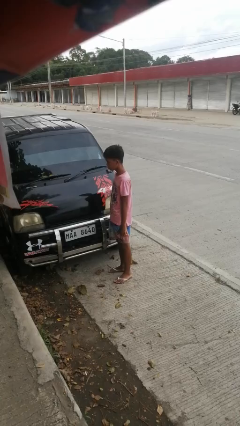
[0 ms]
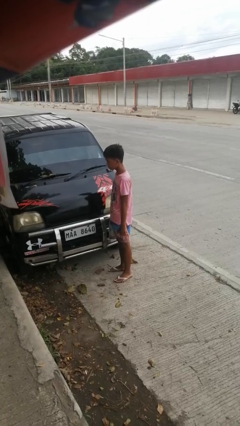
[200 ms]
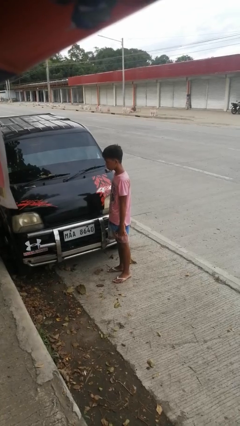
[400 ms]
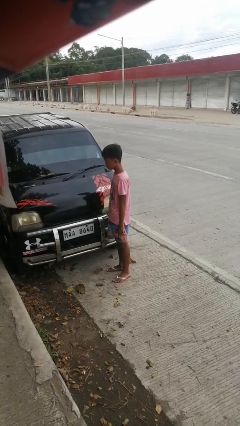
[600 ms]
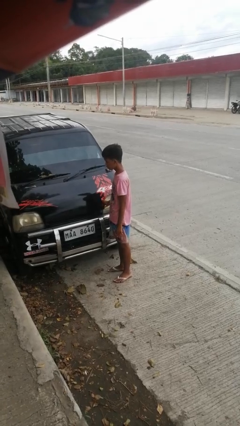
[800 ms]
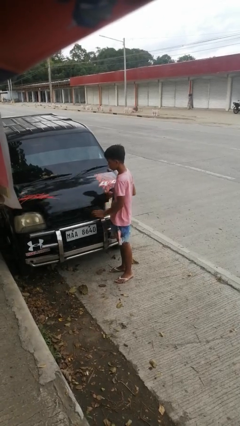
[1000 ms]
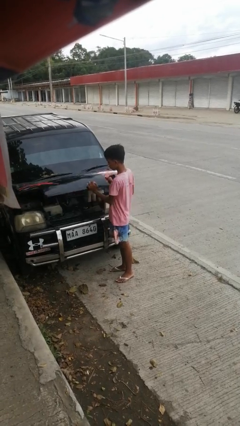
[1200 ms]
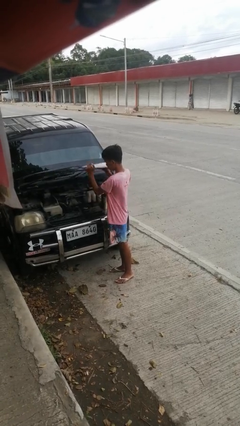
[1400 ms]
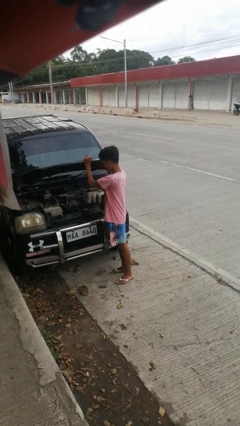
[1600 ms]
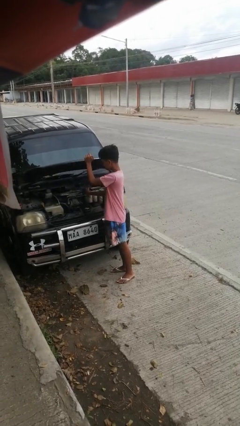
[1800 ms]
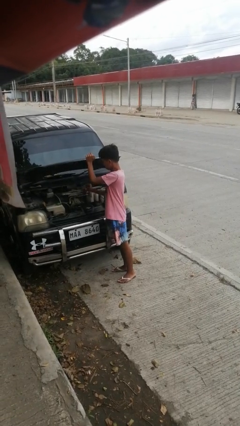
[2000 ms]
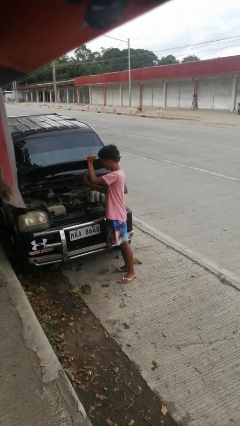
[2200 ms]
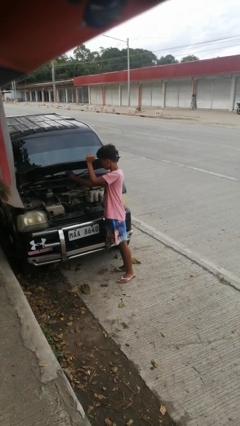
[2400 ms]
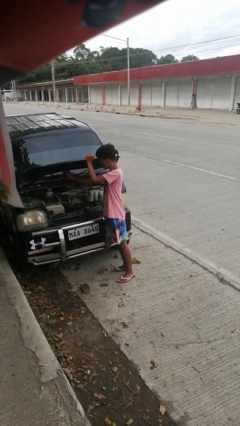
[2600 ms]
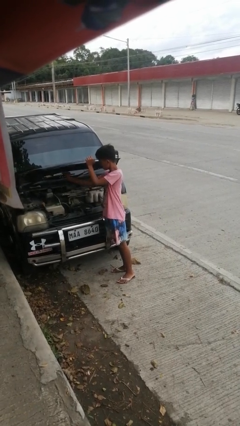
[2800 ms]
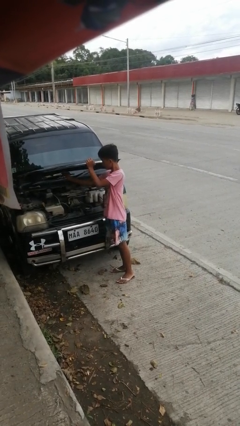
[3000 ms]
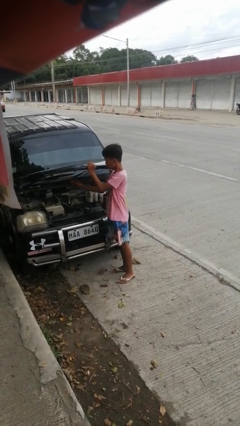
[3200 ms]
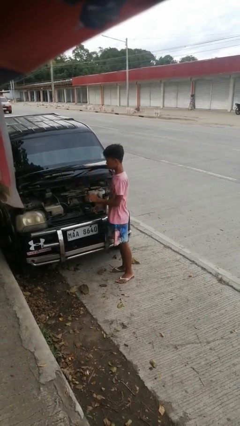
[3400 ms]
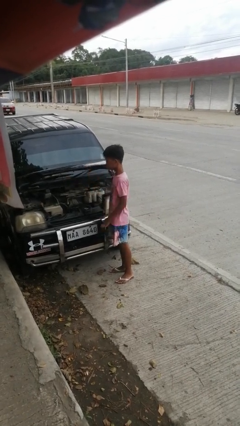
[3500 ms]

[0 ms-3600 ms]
person opens car hood

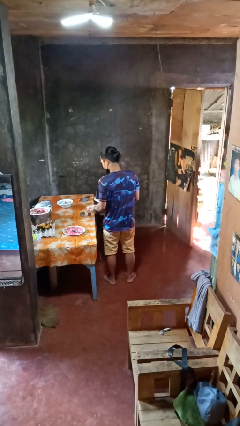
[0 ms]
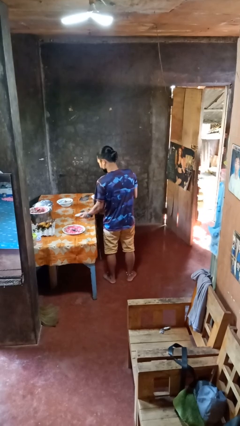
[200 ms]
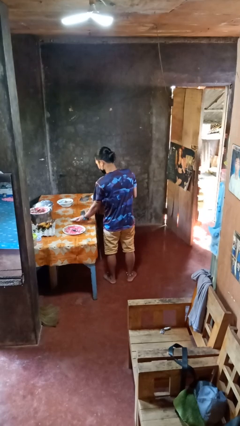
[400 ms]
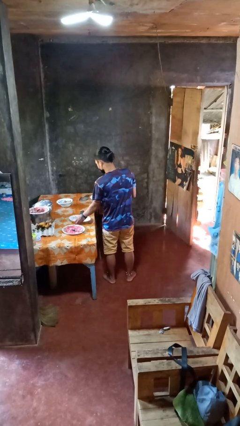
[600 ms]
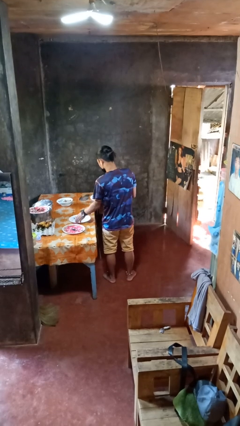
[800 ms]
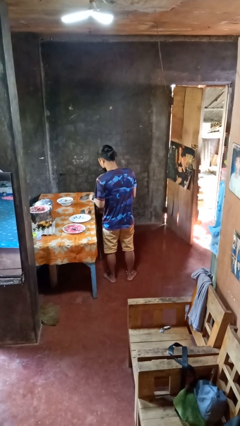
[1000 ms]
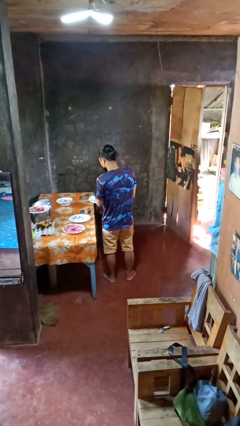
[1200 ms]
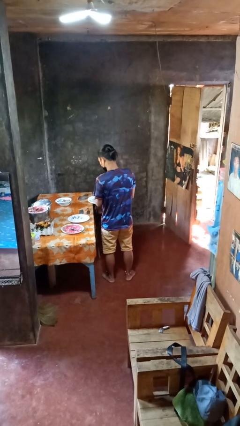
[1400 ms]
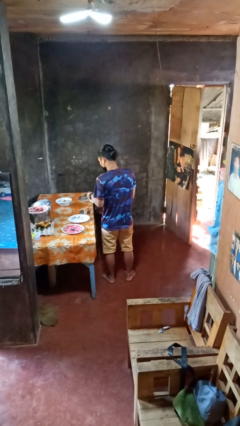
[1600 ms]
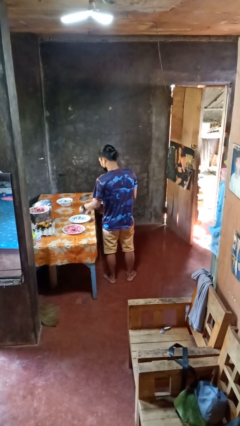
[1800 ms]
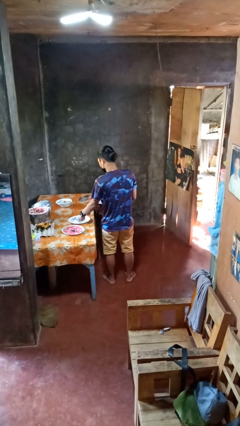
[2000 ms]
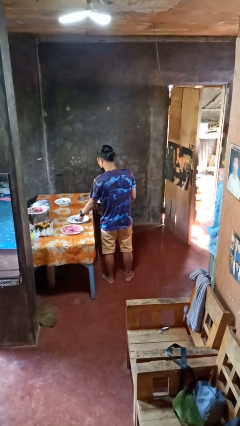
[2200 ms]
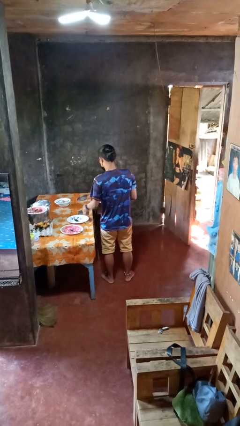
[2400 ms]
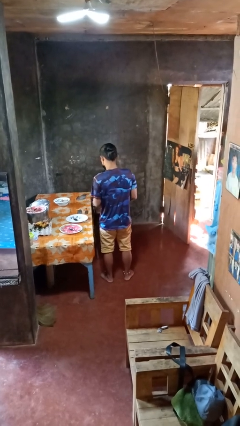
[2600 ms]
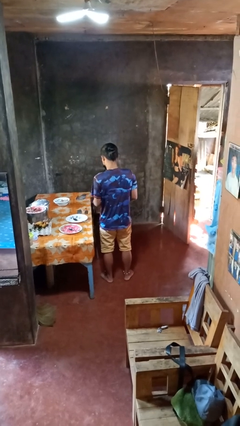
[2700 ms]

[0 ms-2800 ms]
person sets table

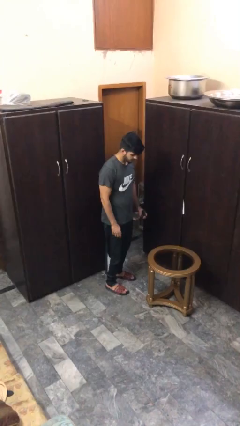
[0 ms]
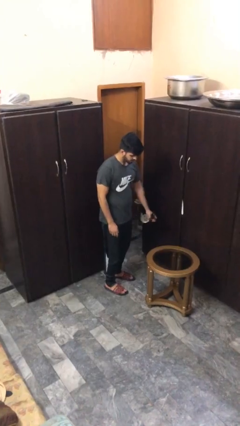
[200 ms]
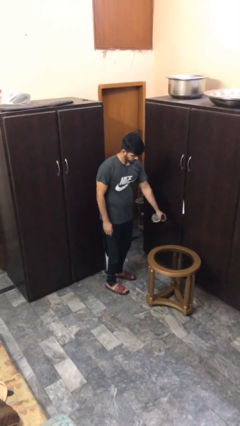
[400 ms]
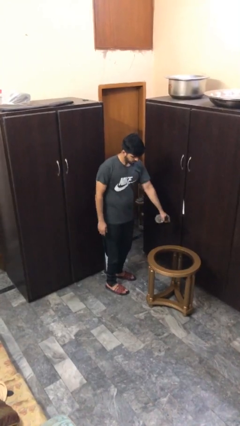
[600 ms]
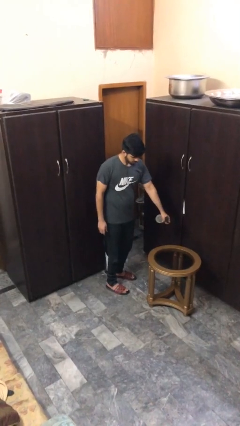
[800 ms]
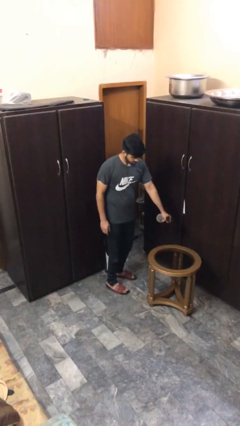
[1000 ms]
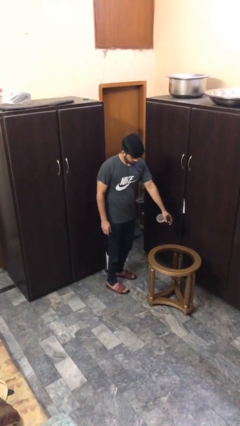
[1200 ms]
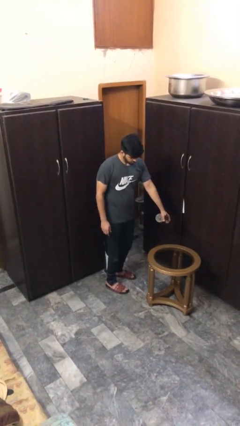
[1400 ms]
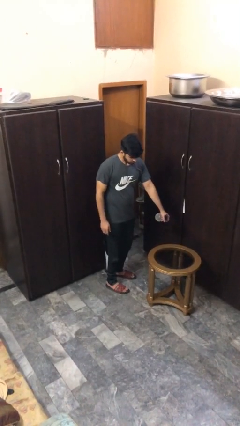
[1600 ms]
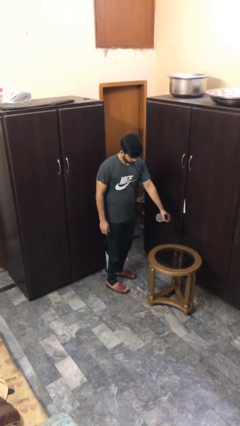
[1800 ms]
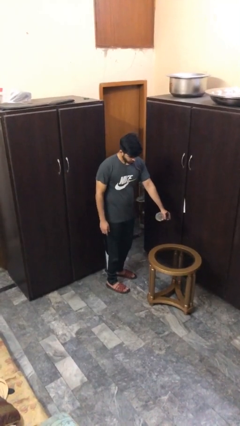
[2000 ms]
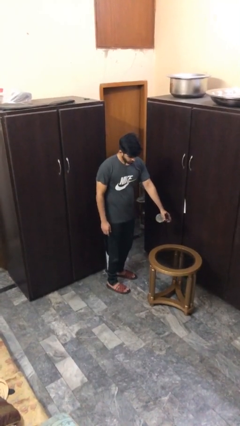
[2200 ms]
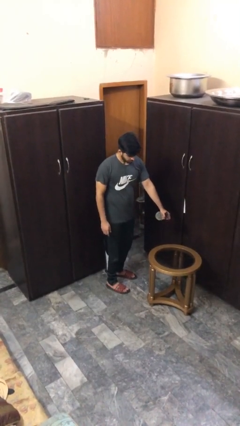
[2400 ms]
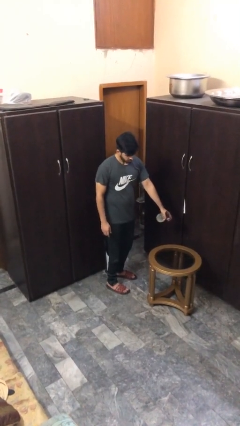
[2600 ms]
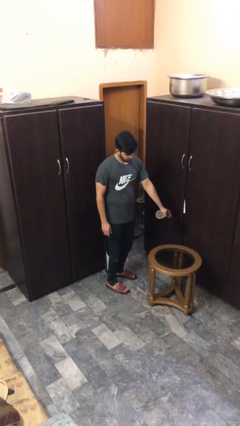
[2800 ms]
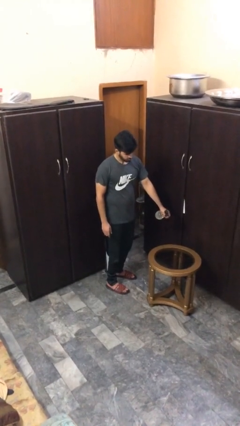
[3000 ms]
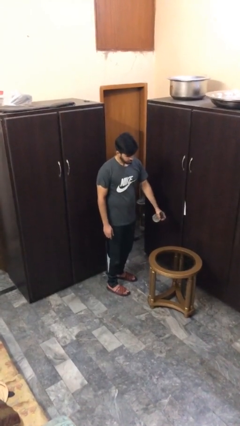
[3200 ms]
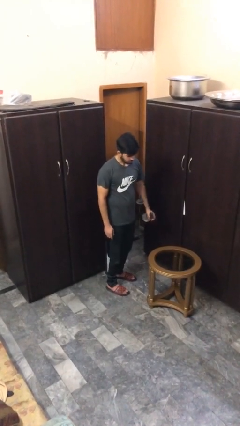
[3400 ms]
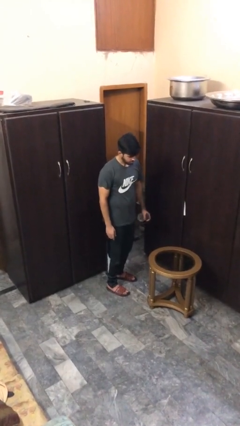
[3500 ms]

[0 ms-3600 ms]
person sprays from bottle

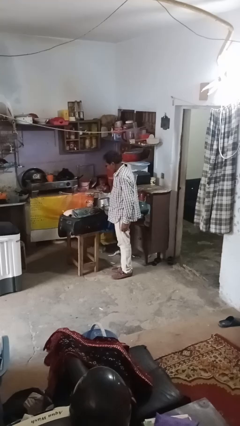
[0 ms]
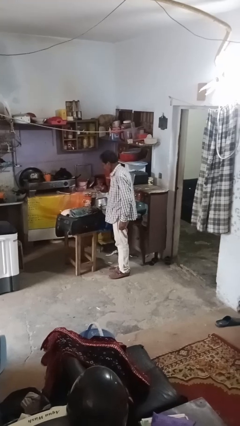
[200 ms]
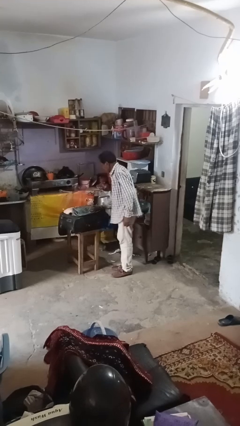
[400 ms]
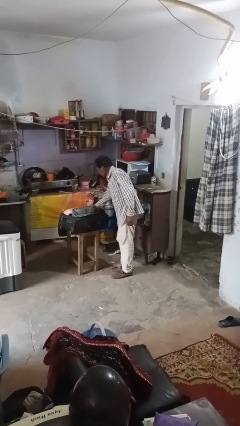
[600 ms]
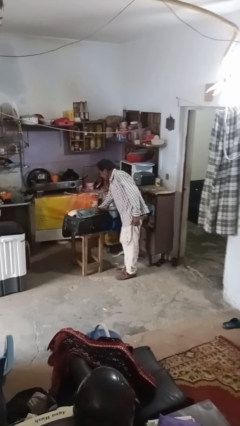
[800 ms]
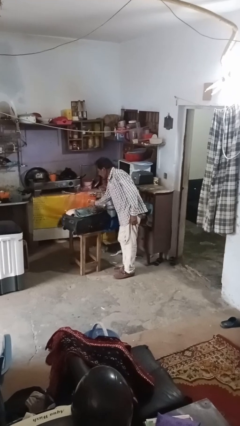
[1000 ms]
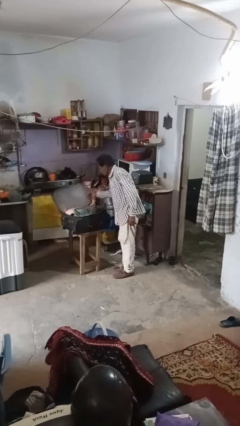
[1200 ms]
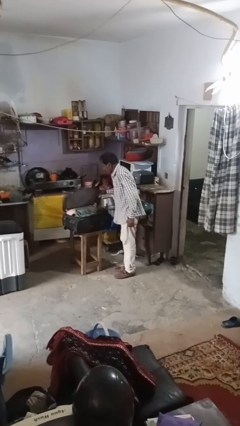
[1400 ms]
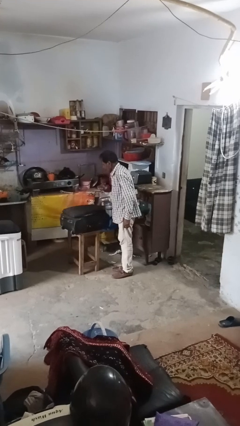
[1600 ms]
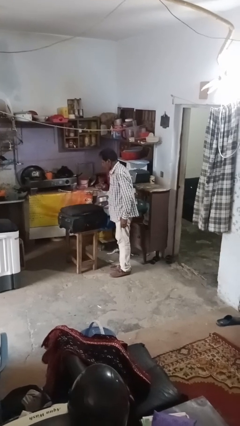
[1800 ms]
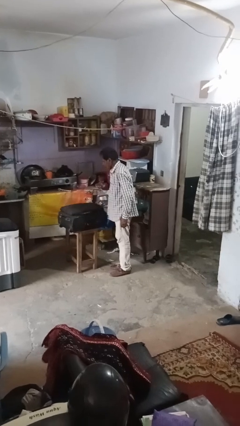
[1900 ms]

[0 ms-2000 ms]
person closes suitcase

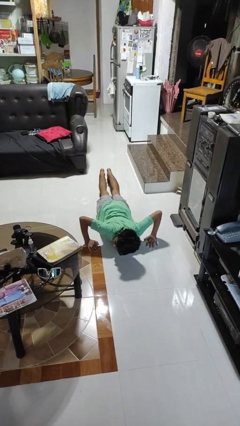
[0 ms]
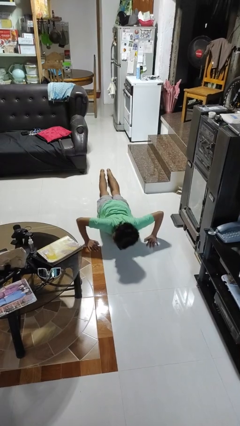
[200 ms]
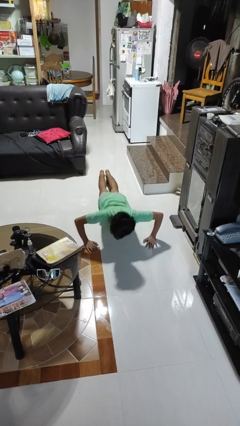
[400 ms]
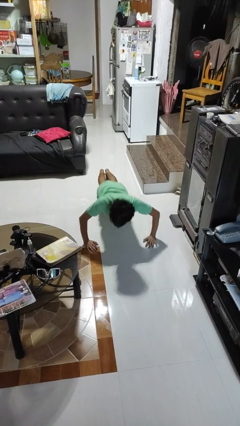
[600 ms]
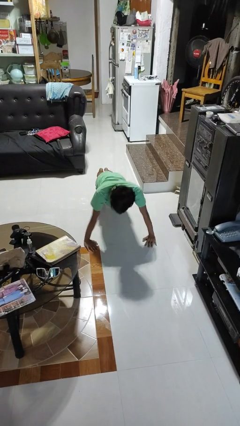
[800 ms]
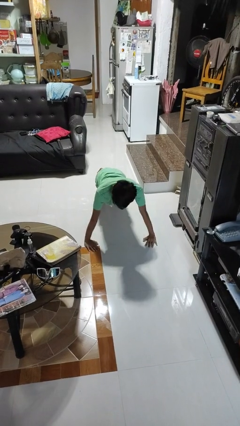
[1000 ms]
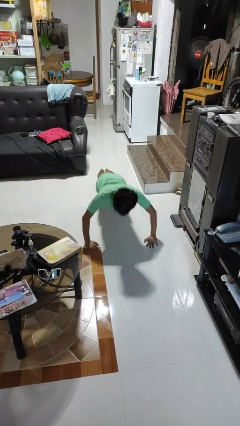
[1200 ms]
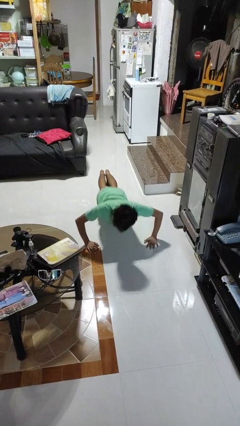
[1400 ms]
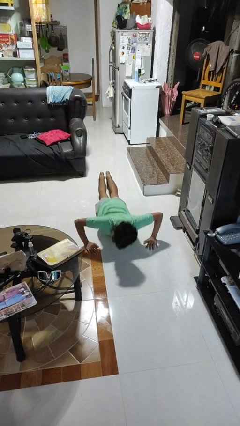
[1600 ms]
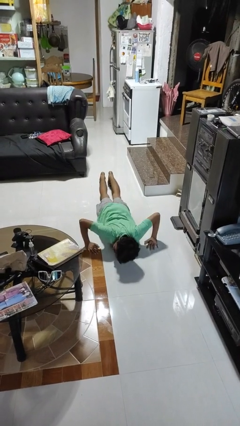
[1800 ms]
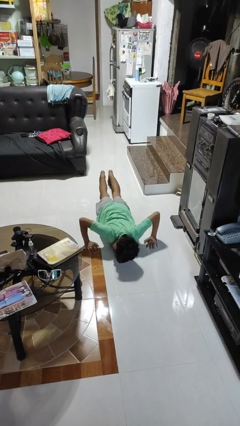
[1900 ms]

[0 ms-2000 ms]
person exercises with pushup

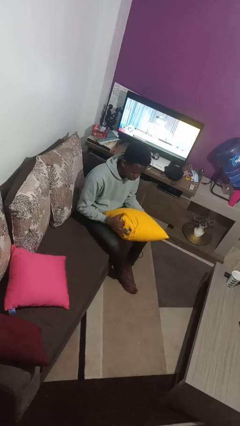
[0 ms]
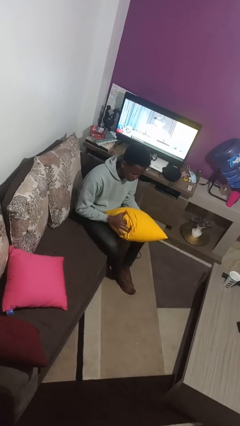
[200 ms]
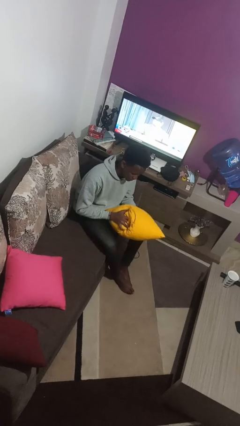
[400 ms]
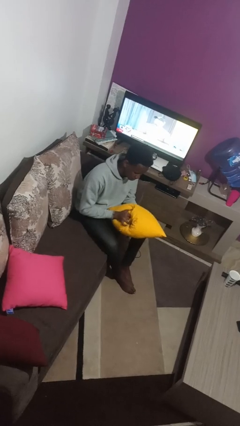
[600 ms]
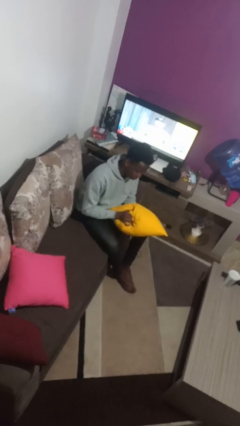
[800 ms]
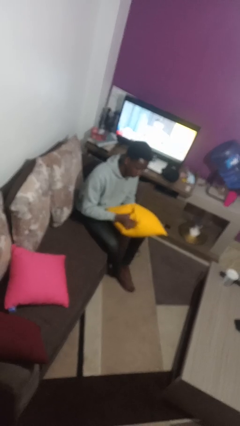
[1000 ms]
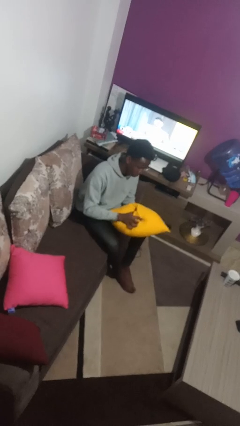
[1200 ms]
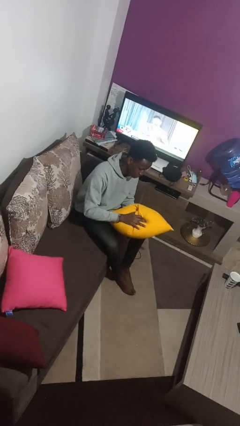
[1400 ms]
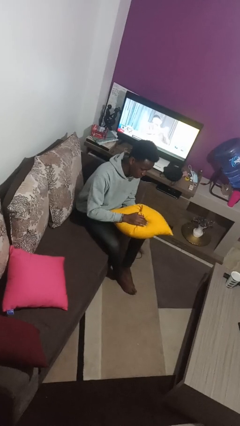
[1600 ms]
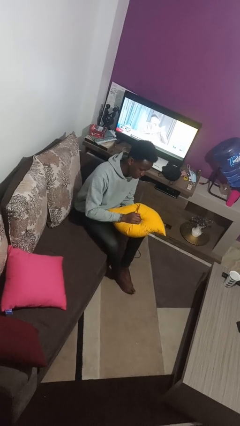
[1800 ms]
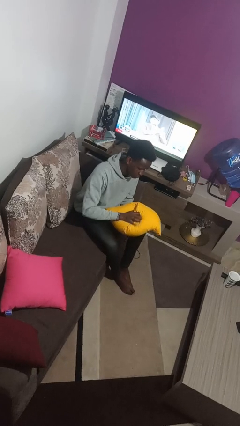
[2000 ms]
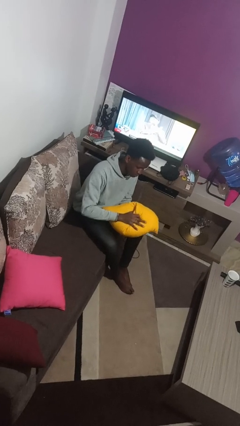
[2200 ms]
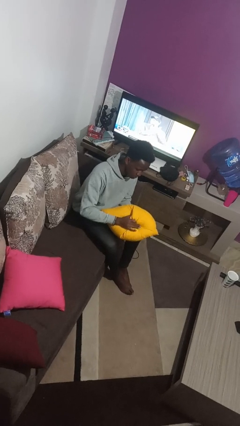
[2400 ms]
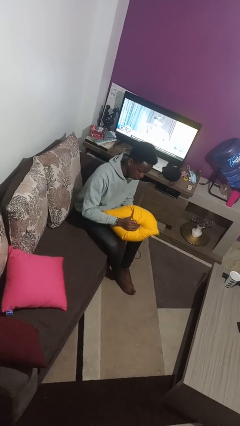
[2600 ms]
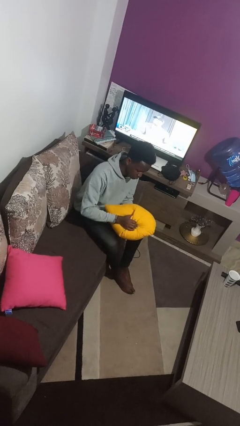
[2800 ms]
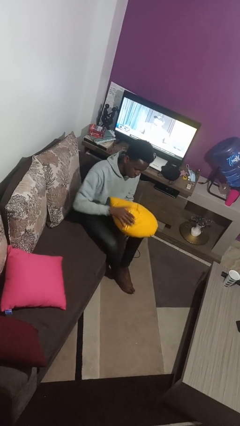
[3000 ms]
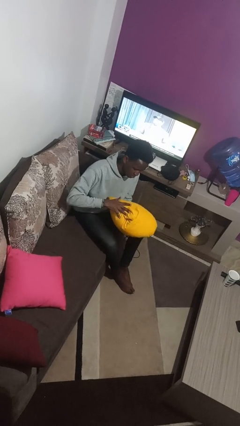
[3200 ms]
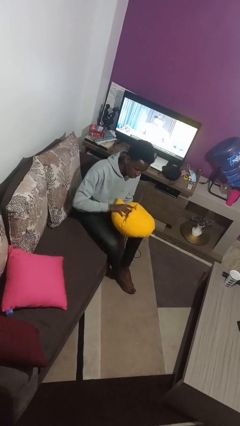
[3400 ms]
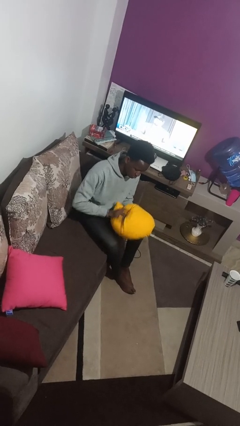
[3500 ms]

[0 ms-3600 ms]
person squeezes object
